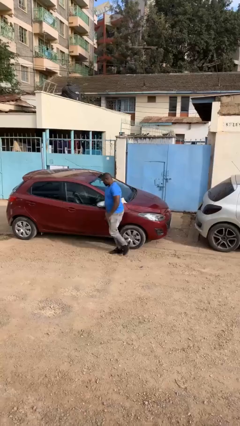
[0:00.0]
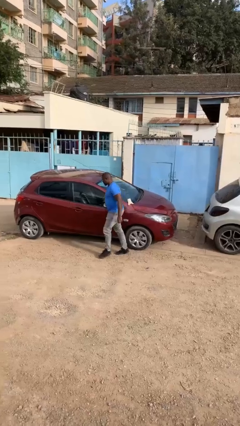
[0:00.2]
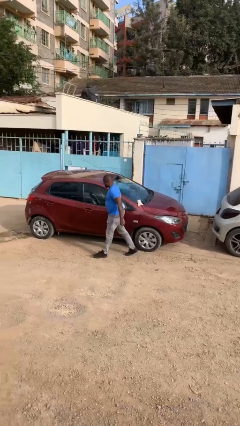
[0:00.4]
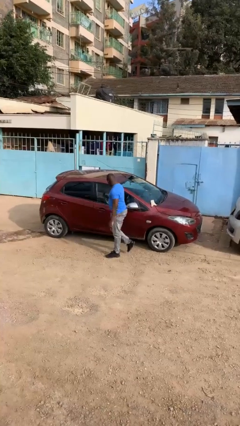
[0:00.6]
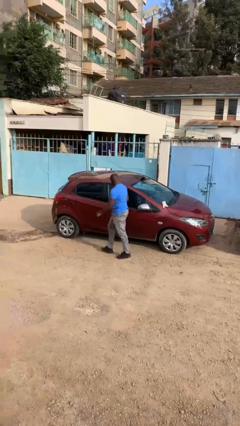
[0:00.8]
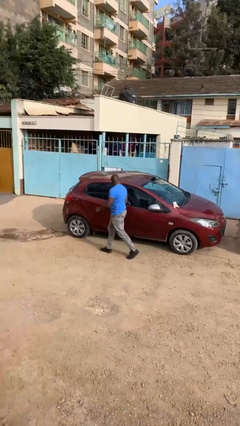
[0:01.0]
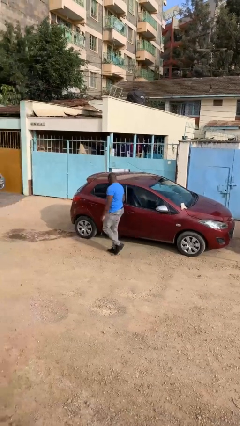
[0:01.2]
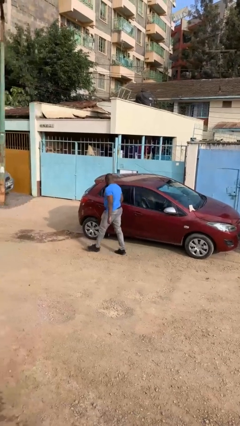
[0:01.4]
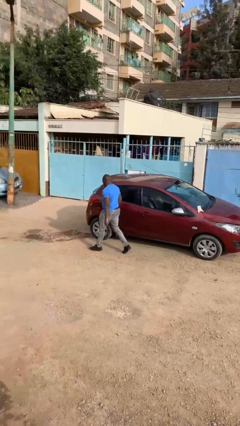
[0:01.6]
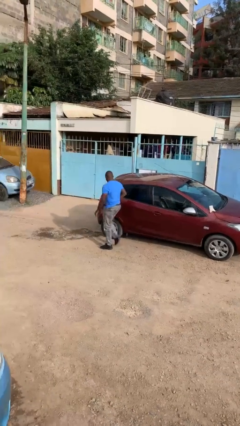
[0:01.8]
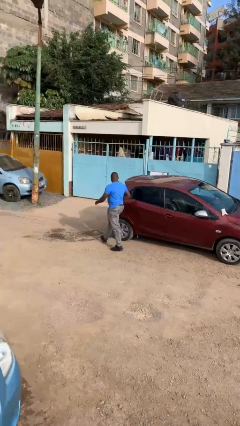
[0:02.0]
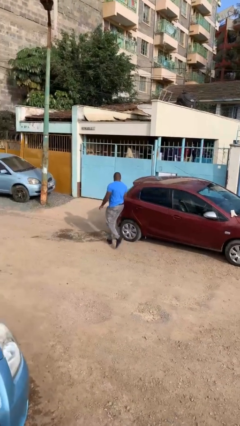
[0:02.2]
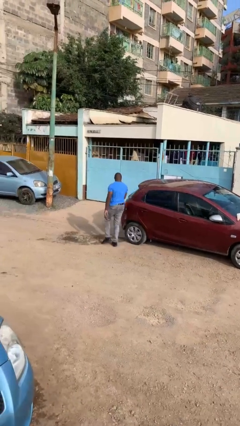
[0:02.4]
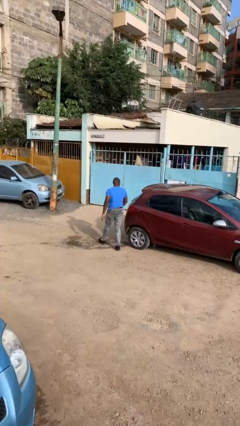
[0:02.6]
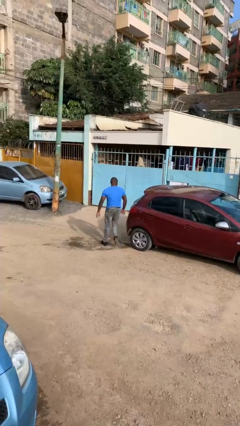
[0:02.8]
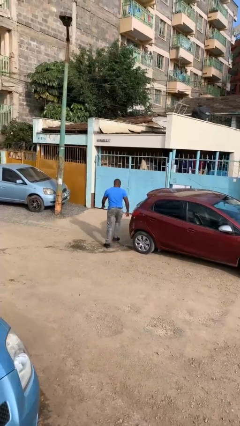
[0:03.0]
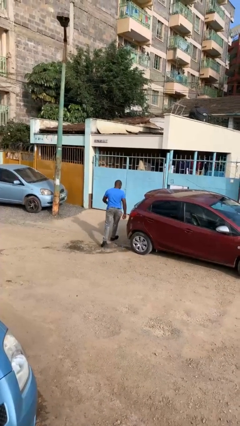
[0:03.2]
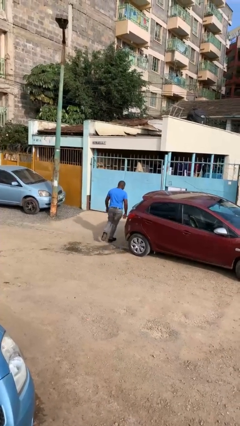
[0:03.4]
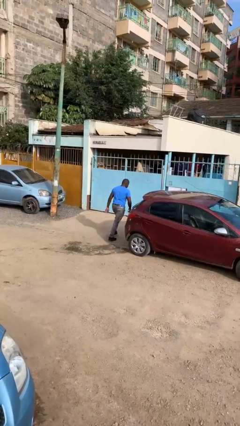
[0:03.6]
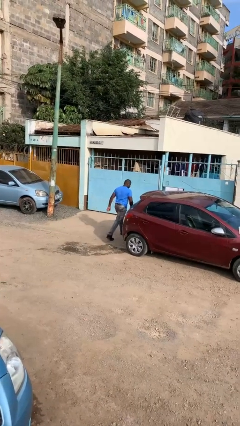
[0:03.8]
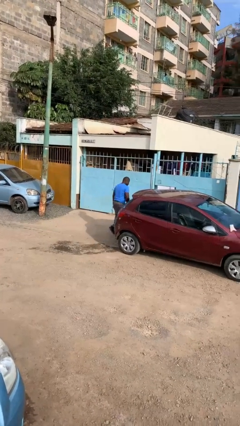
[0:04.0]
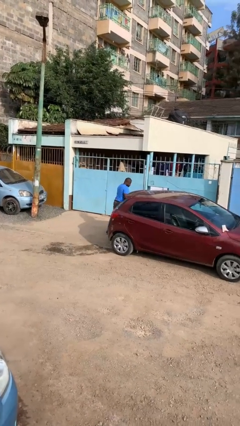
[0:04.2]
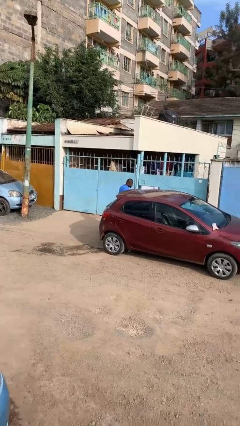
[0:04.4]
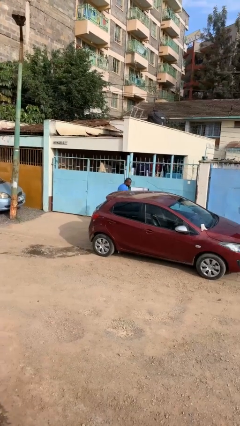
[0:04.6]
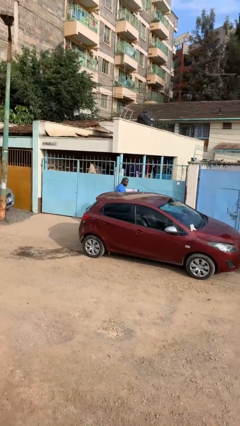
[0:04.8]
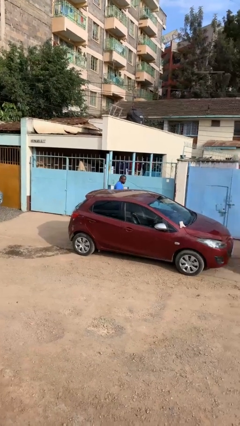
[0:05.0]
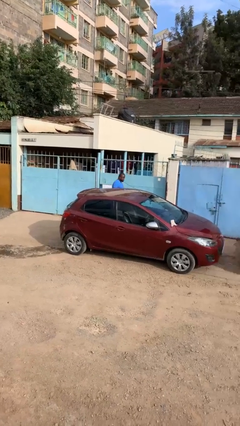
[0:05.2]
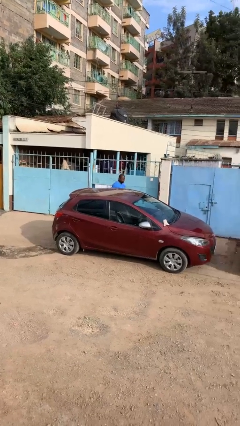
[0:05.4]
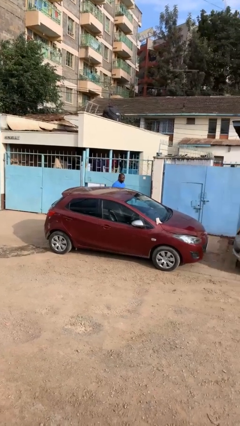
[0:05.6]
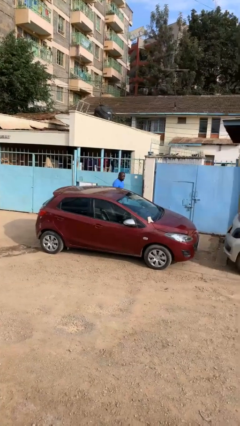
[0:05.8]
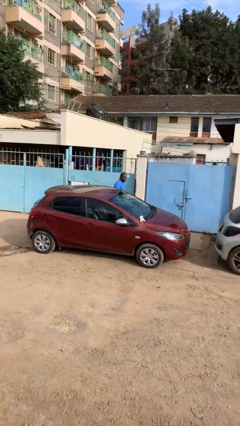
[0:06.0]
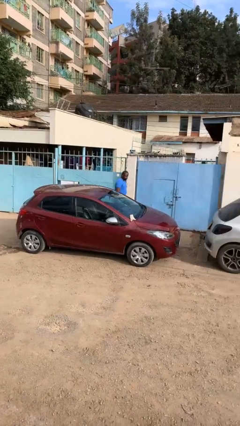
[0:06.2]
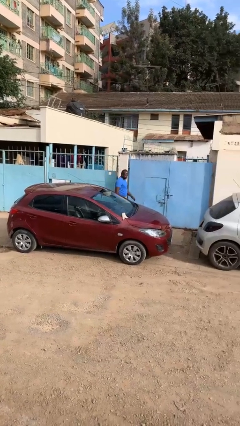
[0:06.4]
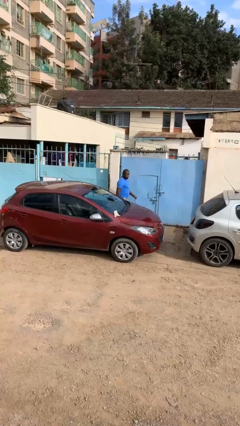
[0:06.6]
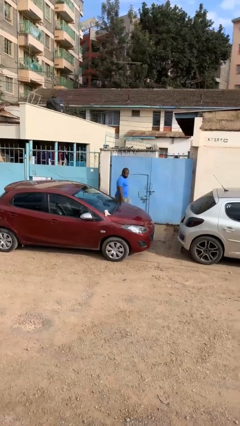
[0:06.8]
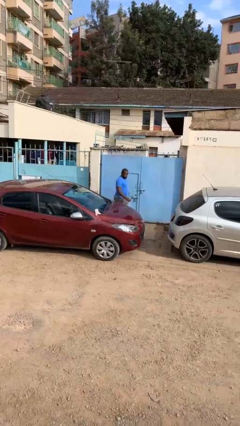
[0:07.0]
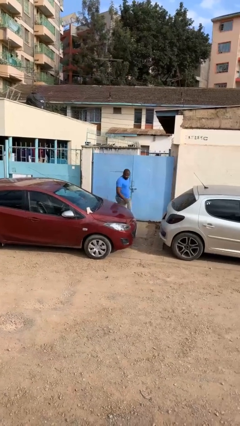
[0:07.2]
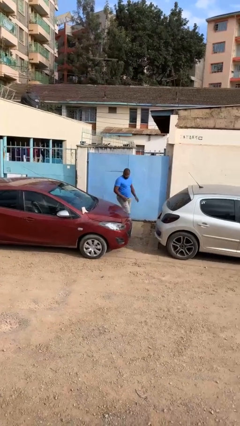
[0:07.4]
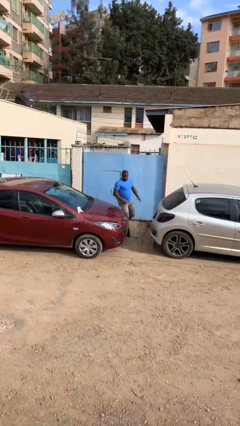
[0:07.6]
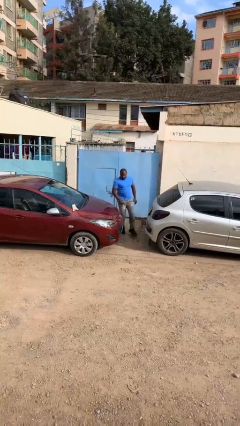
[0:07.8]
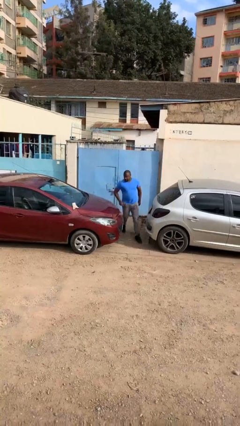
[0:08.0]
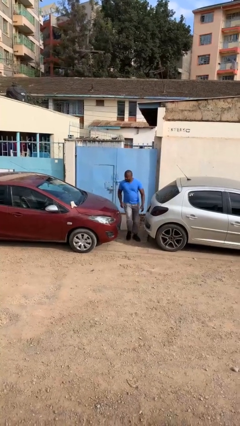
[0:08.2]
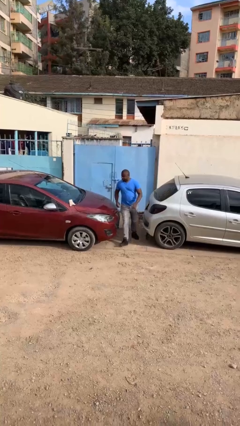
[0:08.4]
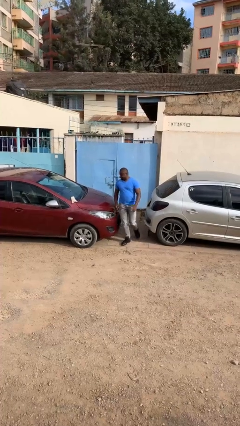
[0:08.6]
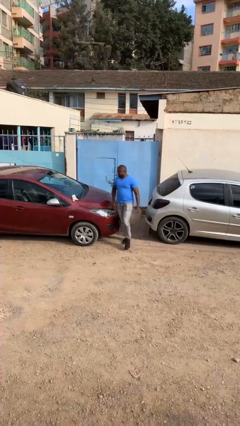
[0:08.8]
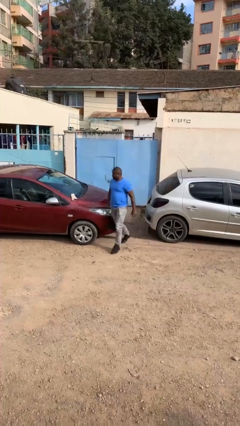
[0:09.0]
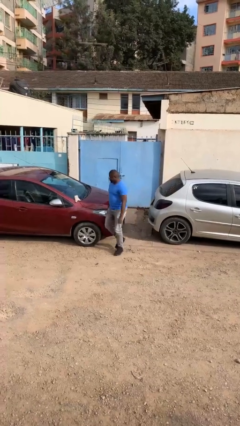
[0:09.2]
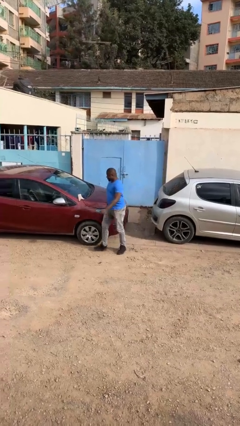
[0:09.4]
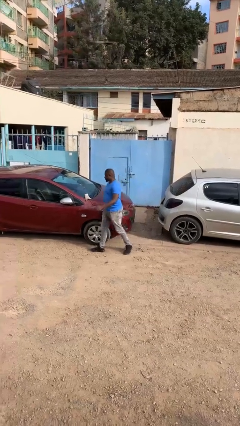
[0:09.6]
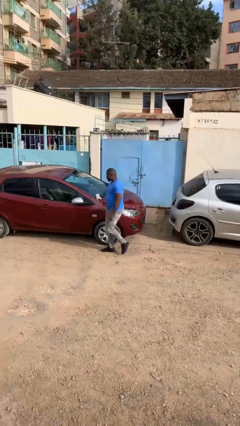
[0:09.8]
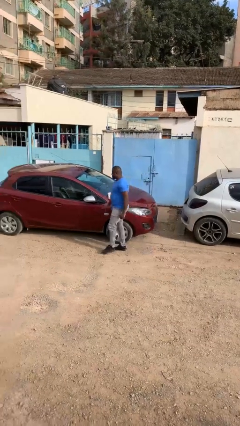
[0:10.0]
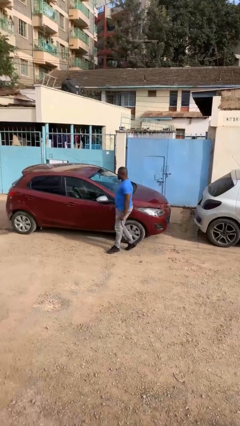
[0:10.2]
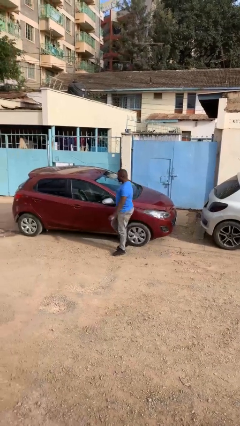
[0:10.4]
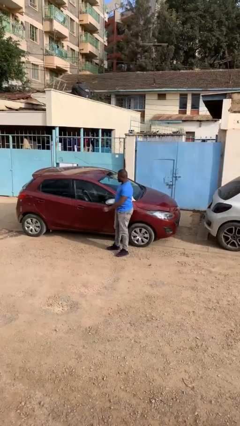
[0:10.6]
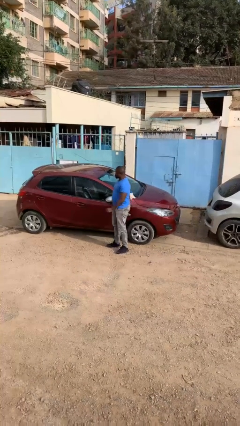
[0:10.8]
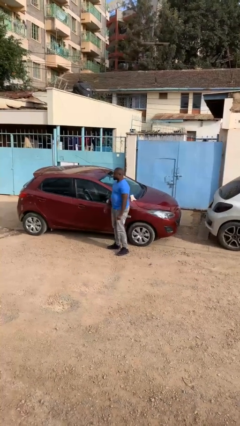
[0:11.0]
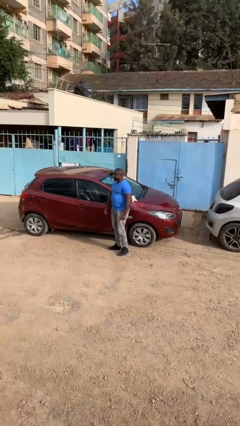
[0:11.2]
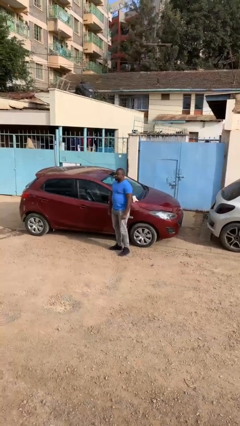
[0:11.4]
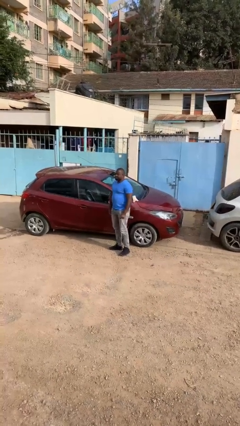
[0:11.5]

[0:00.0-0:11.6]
person walks around car

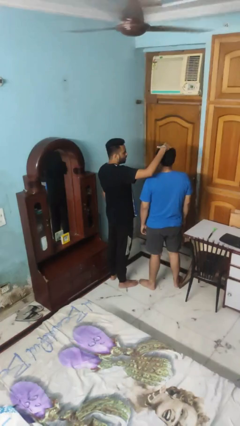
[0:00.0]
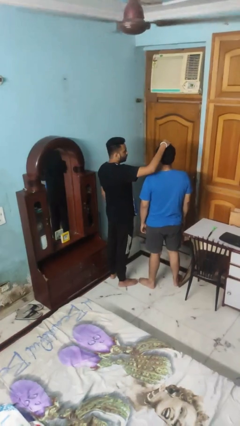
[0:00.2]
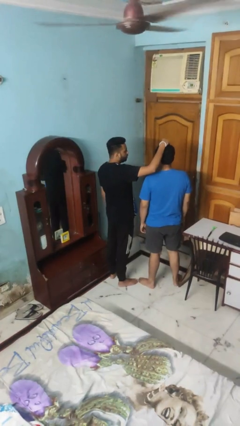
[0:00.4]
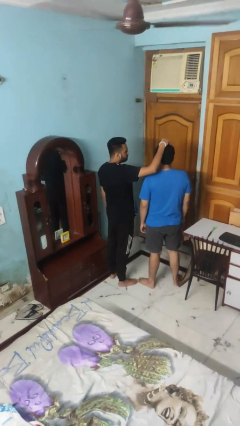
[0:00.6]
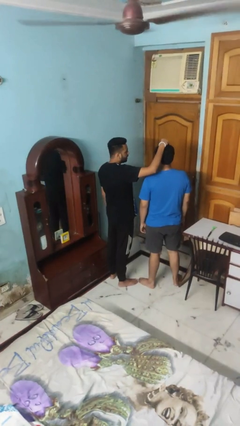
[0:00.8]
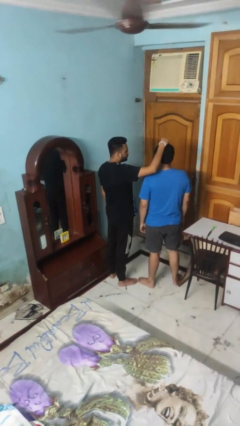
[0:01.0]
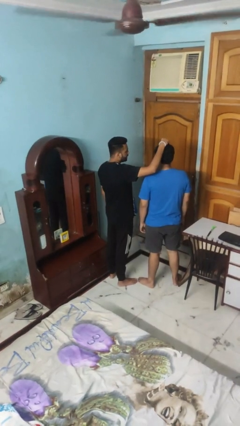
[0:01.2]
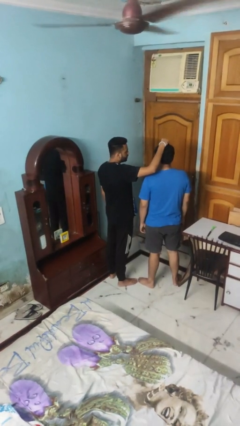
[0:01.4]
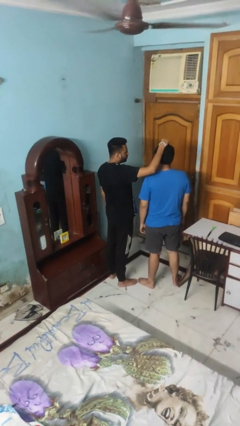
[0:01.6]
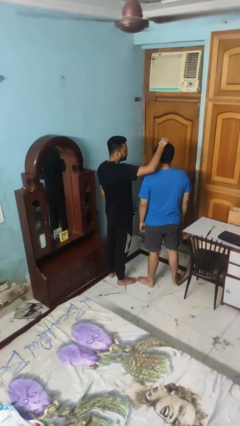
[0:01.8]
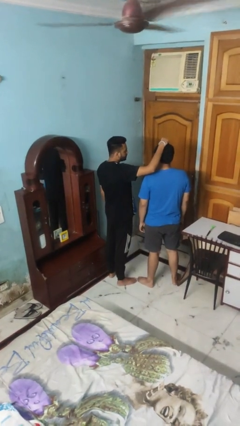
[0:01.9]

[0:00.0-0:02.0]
person grabs person by hair

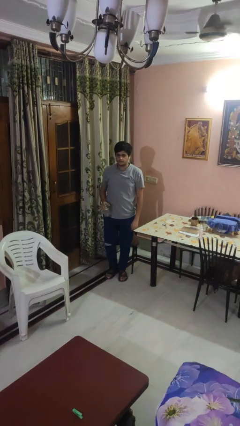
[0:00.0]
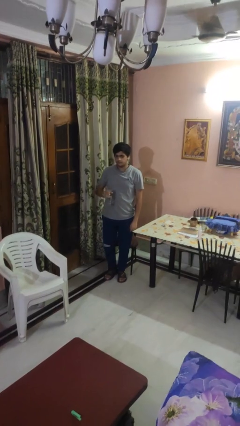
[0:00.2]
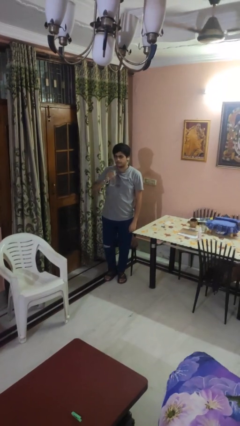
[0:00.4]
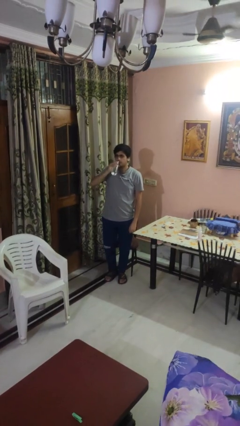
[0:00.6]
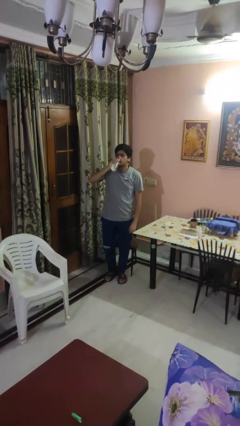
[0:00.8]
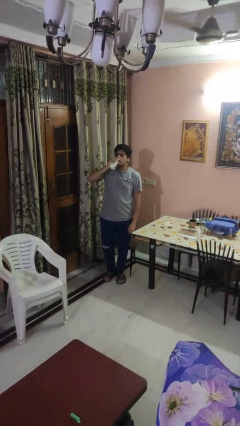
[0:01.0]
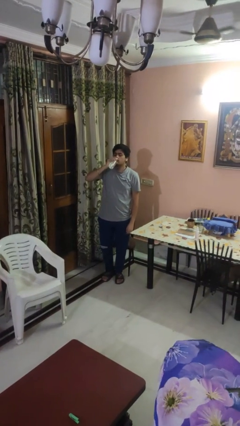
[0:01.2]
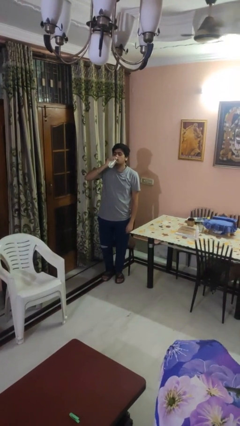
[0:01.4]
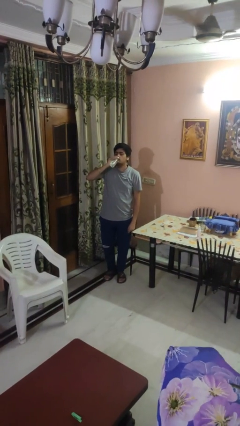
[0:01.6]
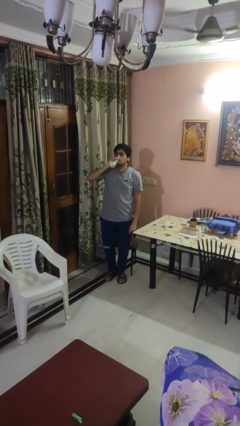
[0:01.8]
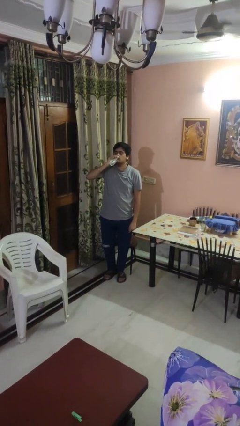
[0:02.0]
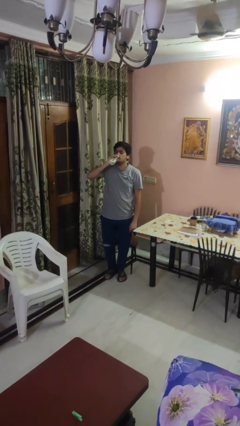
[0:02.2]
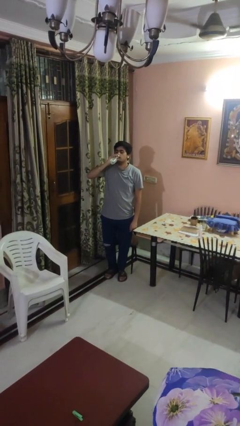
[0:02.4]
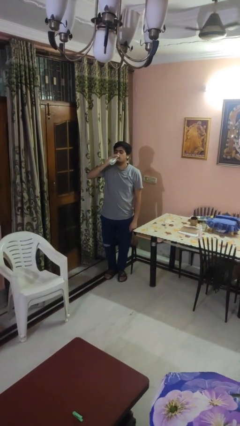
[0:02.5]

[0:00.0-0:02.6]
person drinks from bottle

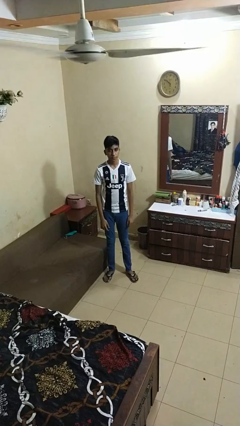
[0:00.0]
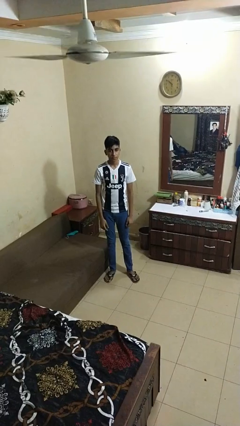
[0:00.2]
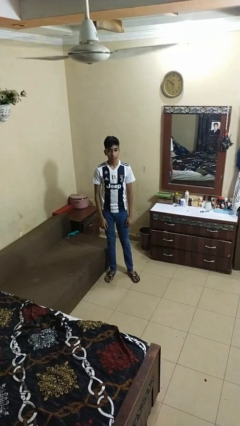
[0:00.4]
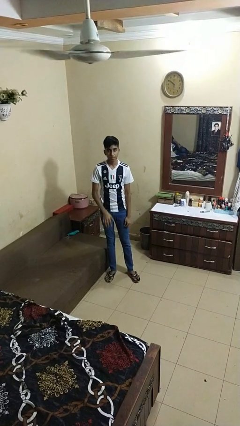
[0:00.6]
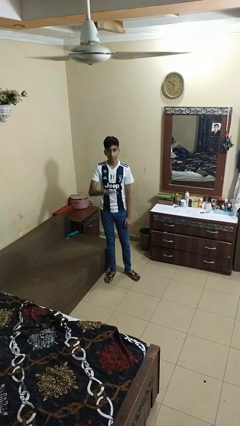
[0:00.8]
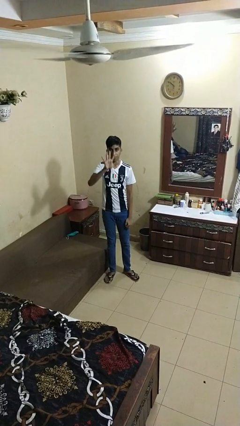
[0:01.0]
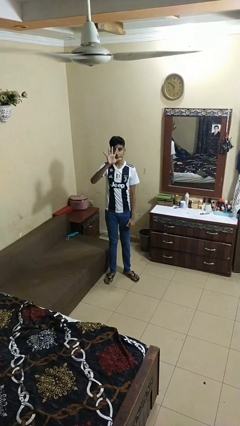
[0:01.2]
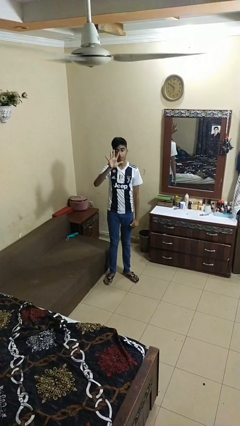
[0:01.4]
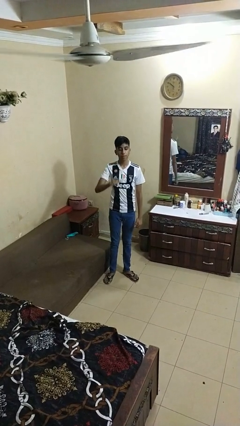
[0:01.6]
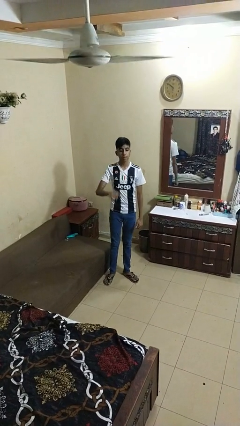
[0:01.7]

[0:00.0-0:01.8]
person gestures number five
